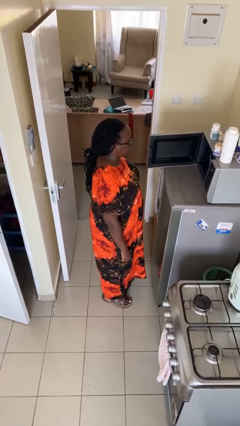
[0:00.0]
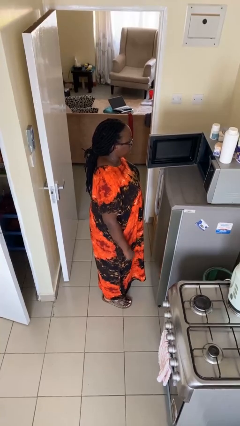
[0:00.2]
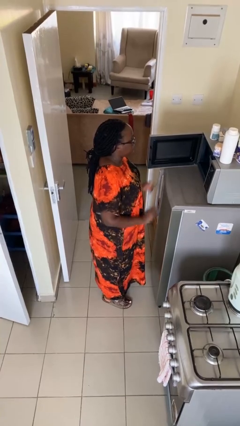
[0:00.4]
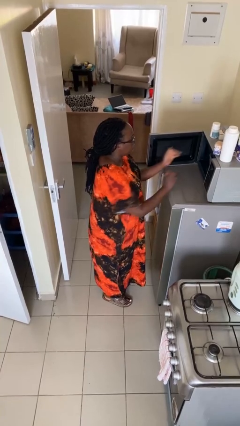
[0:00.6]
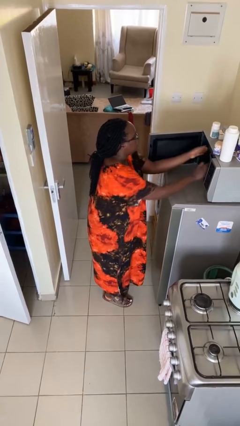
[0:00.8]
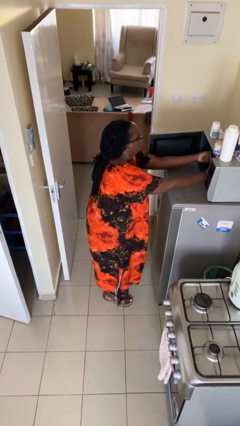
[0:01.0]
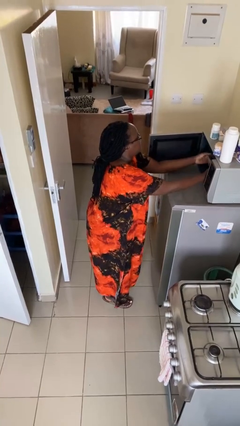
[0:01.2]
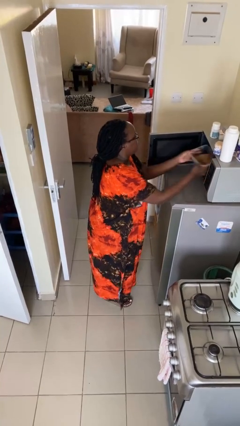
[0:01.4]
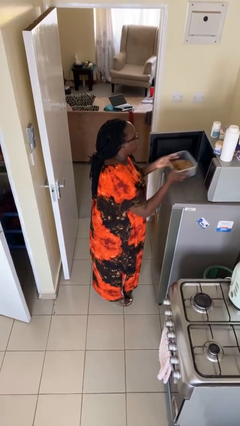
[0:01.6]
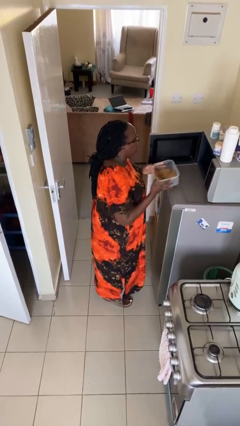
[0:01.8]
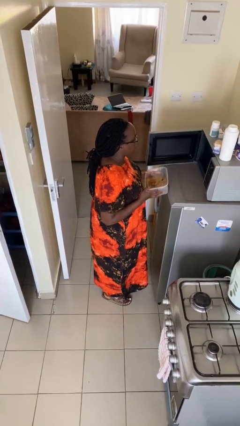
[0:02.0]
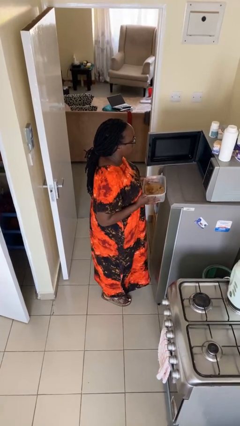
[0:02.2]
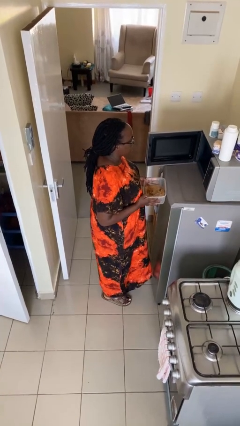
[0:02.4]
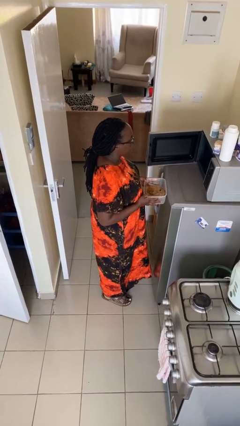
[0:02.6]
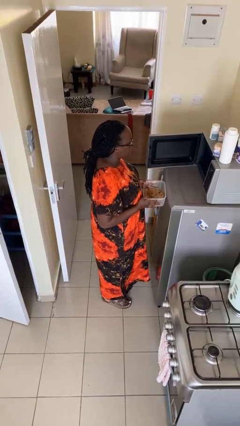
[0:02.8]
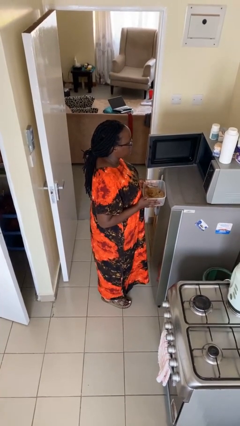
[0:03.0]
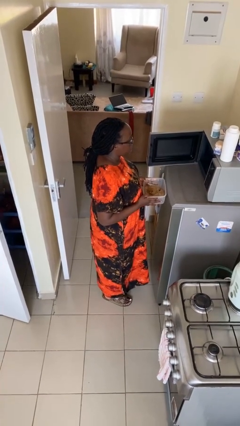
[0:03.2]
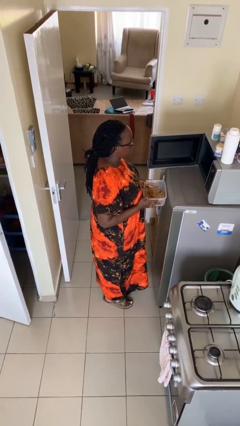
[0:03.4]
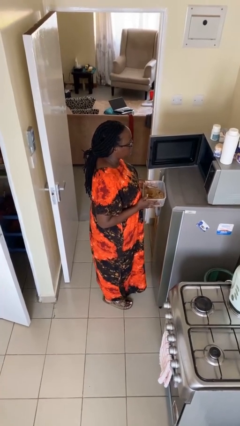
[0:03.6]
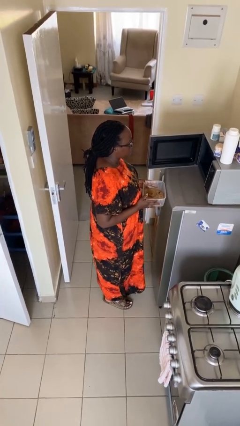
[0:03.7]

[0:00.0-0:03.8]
person takes object from microwave

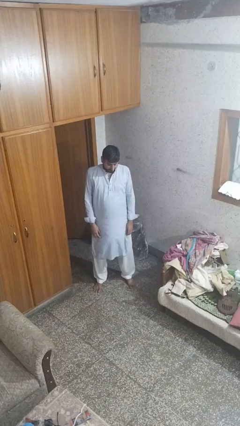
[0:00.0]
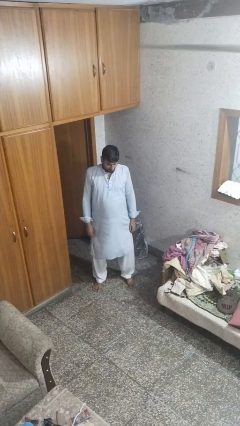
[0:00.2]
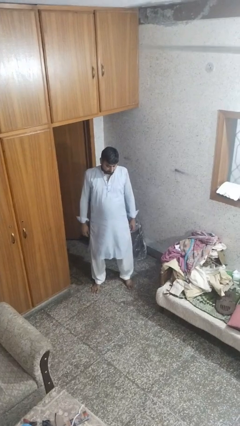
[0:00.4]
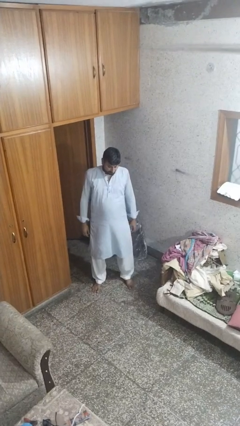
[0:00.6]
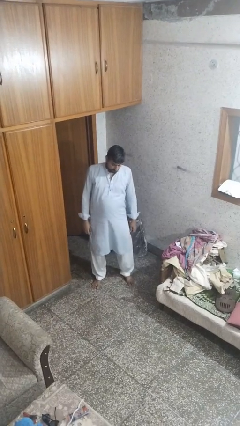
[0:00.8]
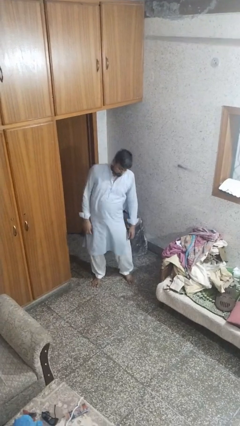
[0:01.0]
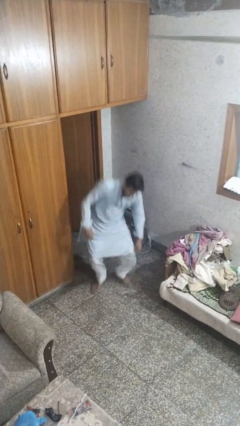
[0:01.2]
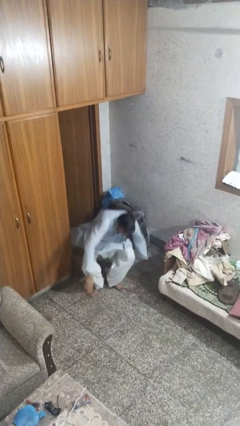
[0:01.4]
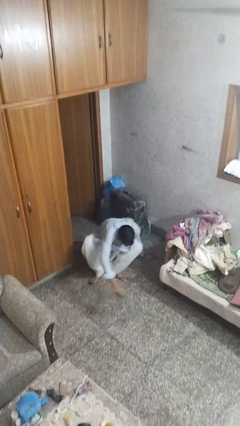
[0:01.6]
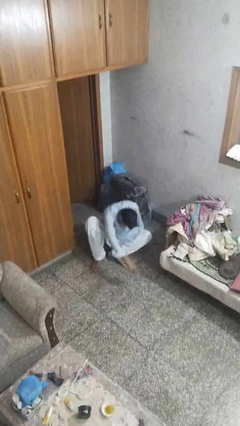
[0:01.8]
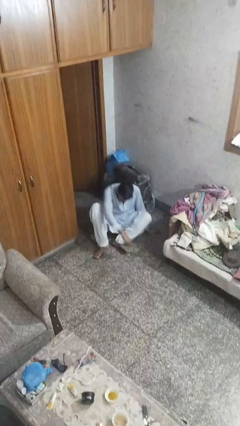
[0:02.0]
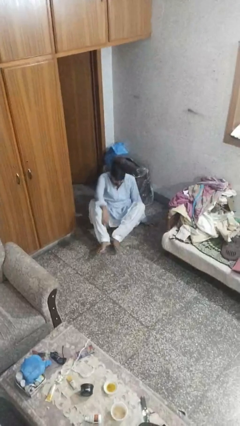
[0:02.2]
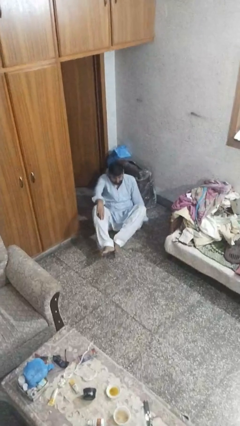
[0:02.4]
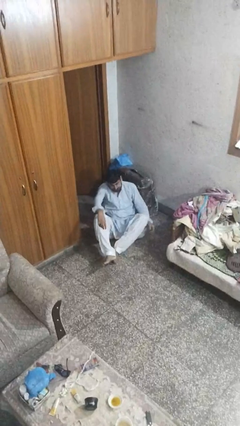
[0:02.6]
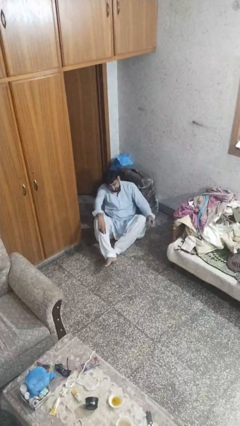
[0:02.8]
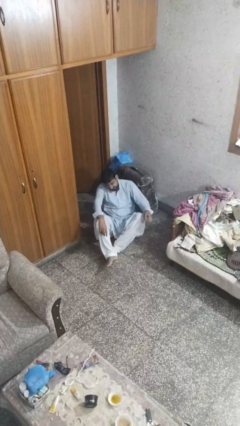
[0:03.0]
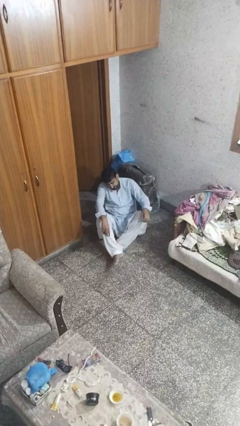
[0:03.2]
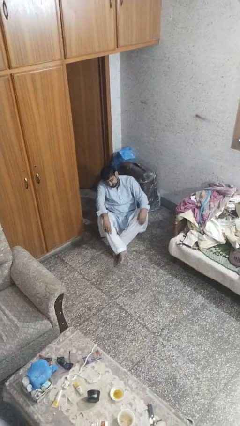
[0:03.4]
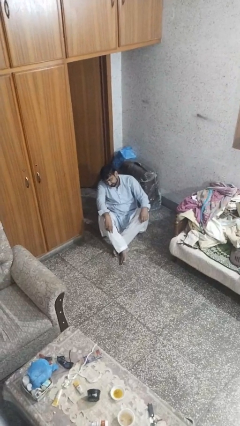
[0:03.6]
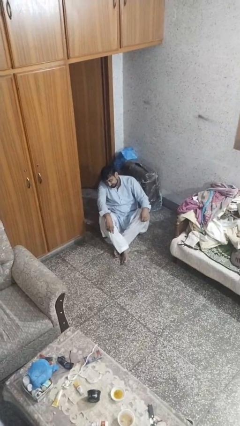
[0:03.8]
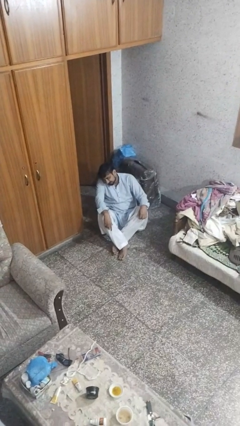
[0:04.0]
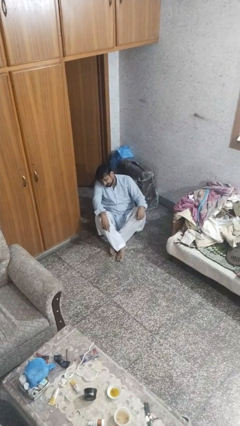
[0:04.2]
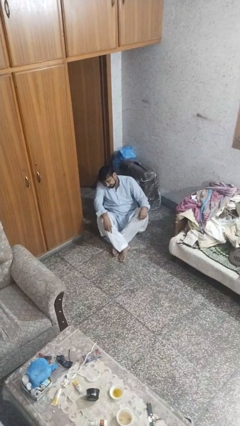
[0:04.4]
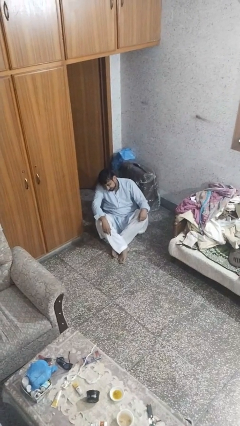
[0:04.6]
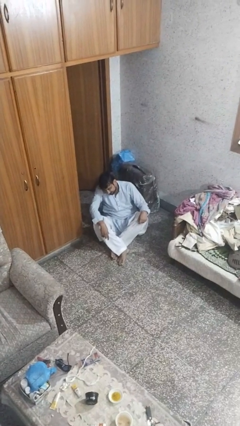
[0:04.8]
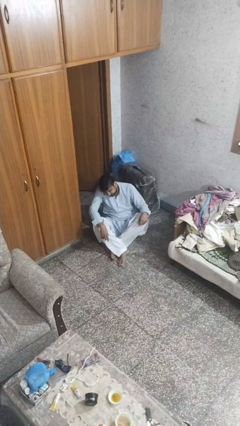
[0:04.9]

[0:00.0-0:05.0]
person falls while standing

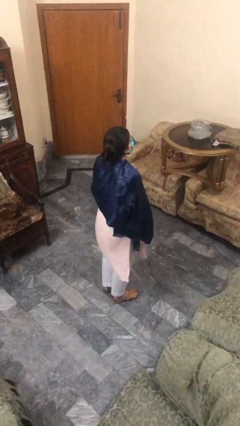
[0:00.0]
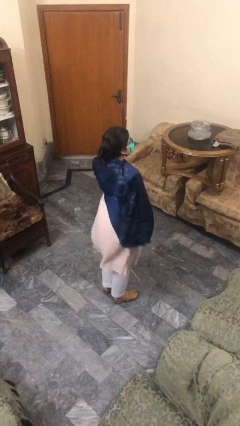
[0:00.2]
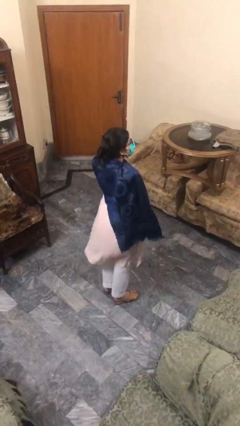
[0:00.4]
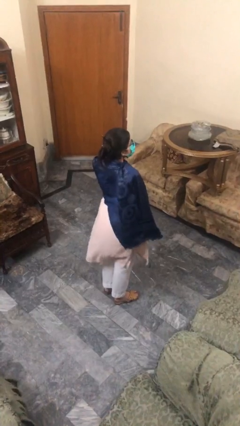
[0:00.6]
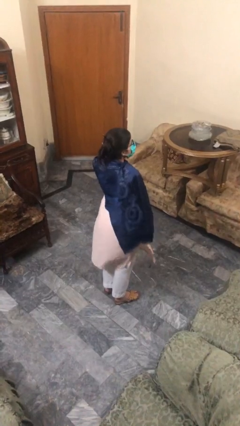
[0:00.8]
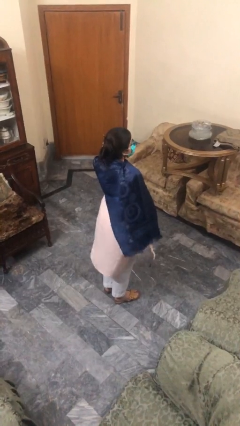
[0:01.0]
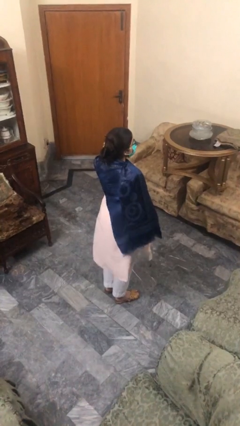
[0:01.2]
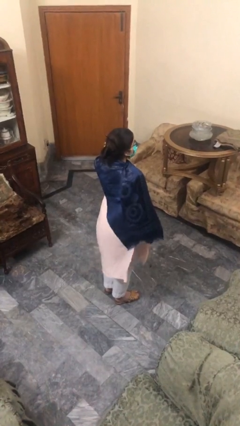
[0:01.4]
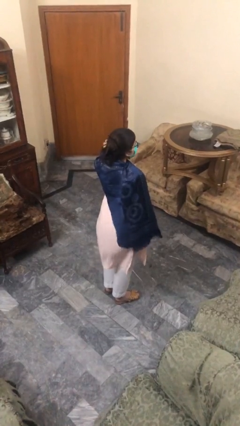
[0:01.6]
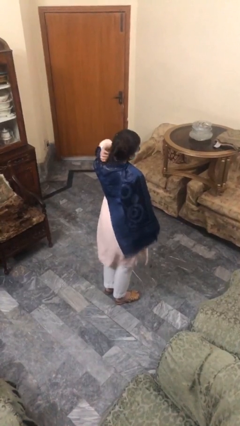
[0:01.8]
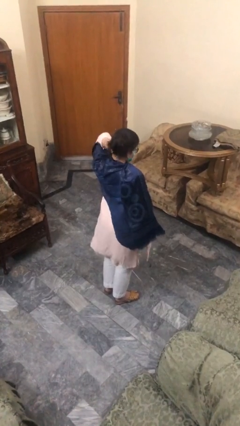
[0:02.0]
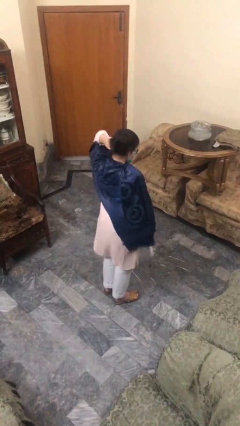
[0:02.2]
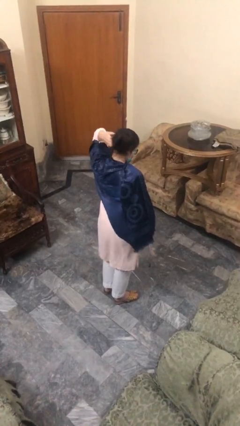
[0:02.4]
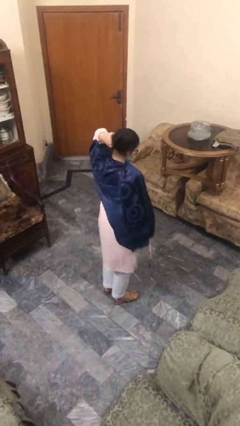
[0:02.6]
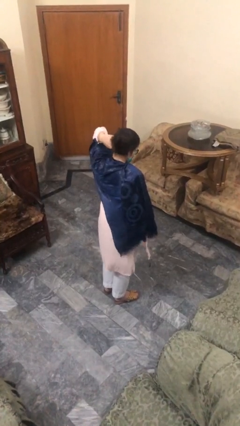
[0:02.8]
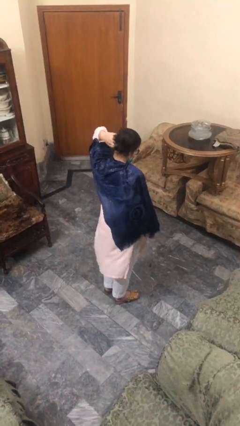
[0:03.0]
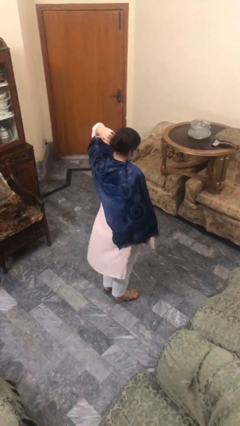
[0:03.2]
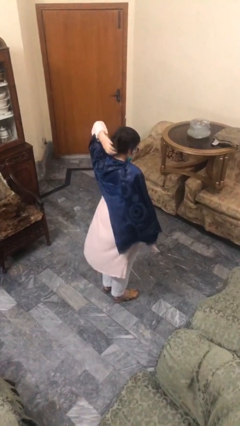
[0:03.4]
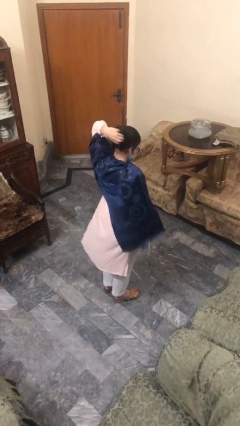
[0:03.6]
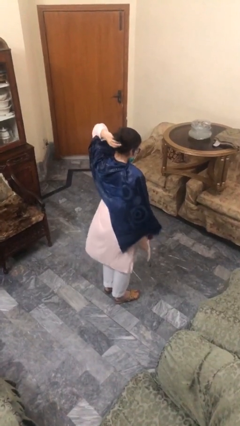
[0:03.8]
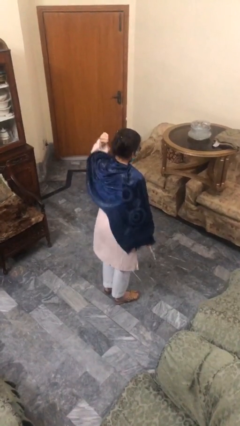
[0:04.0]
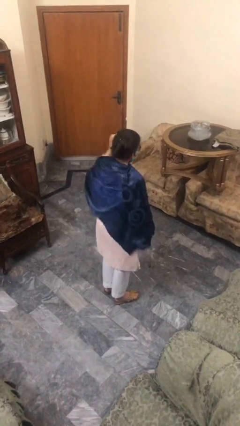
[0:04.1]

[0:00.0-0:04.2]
person scratches face

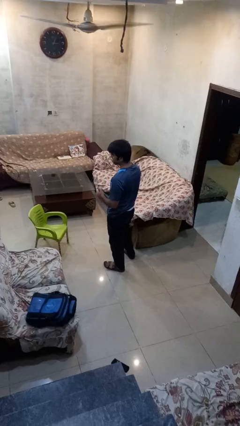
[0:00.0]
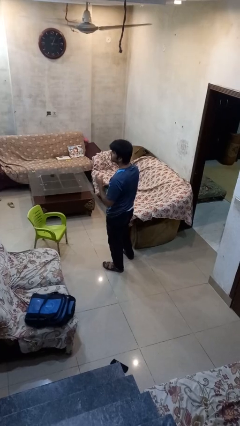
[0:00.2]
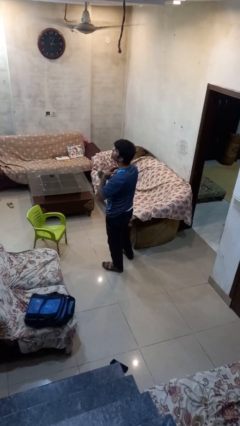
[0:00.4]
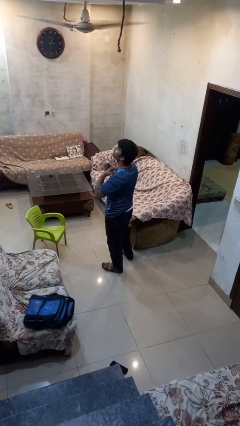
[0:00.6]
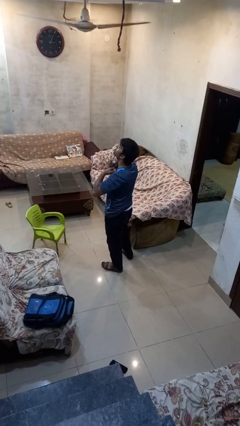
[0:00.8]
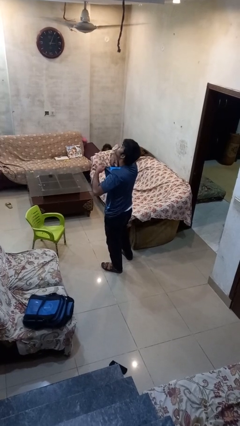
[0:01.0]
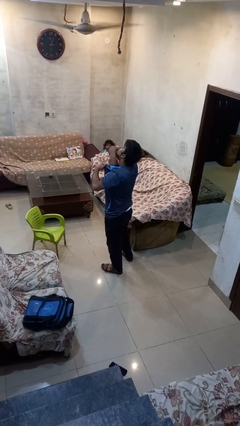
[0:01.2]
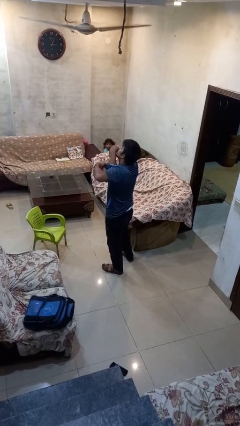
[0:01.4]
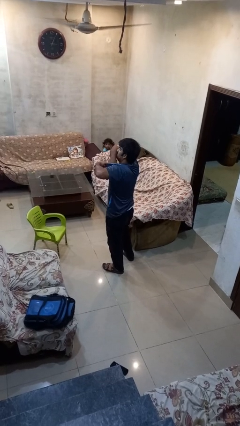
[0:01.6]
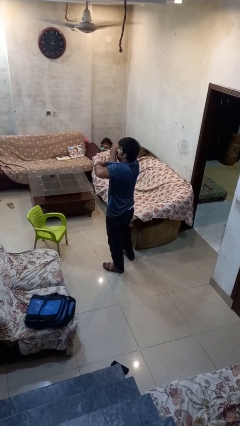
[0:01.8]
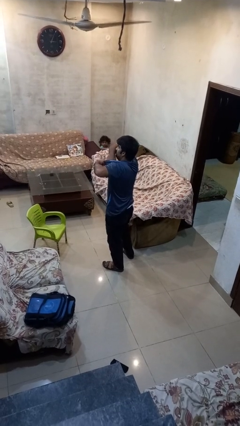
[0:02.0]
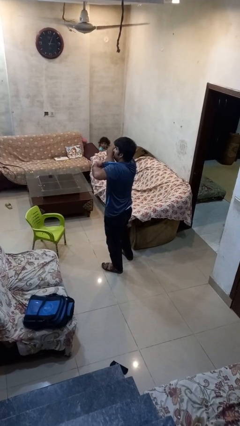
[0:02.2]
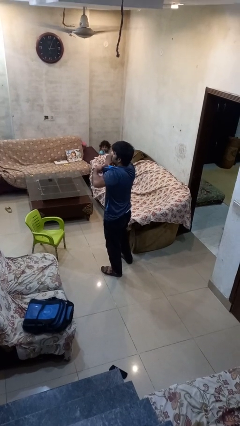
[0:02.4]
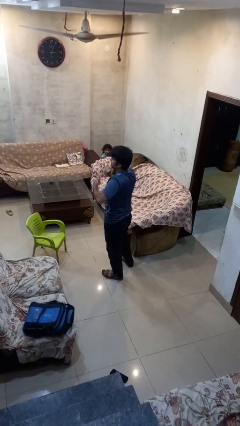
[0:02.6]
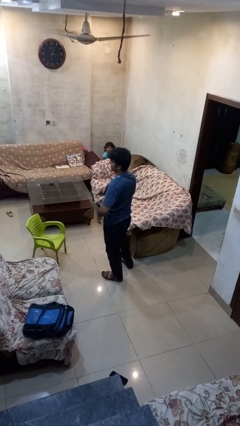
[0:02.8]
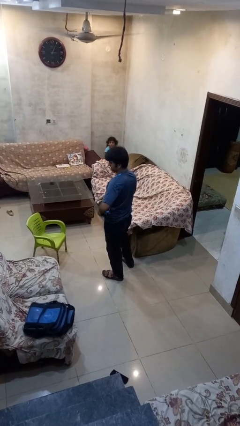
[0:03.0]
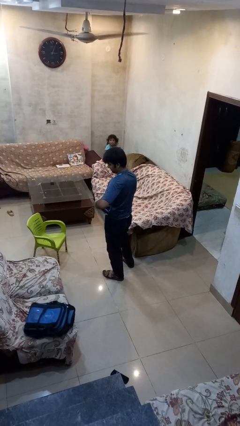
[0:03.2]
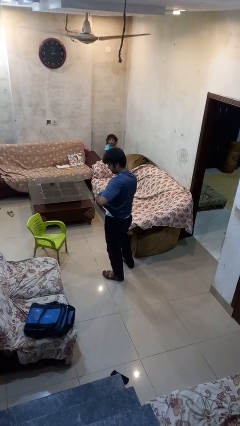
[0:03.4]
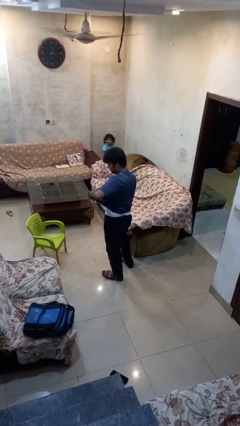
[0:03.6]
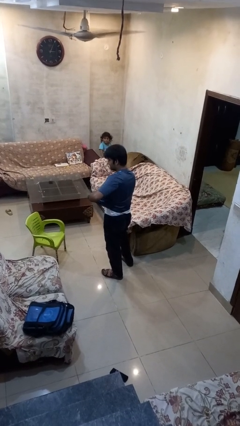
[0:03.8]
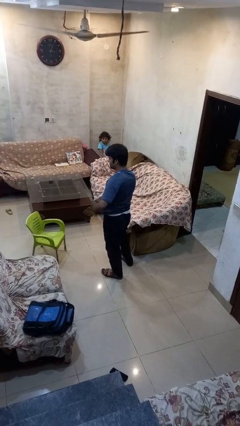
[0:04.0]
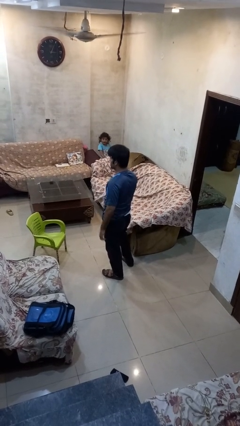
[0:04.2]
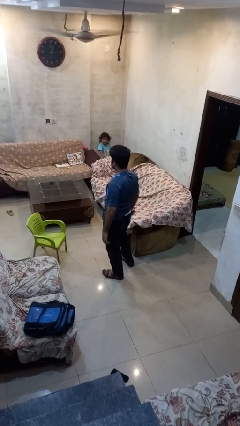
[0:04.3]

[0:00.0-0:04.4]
person applies deodorant

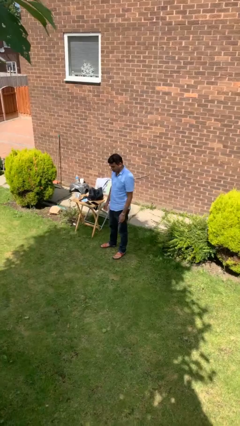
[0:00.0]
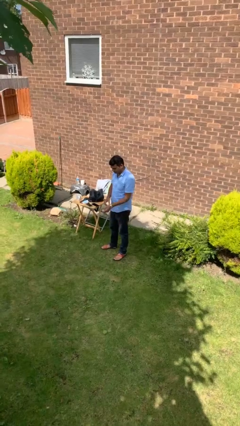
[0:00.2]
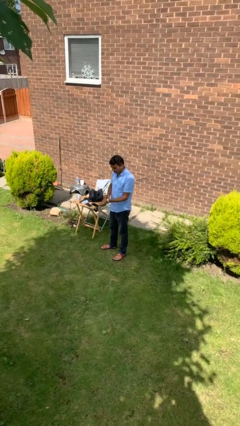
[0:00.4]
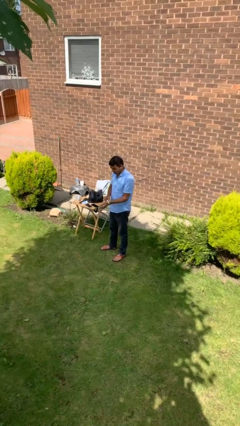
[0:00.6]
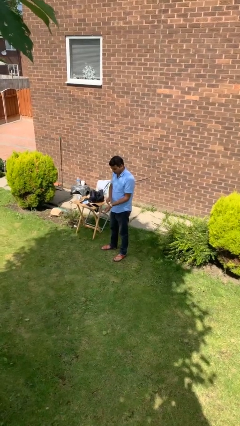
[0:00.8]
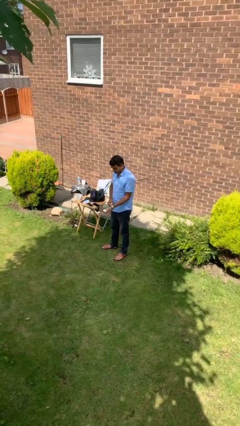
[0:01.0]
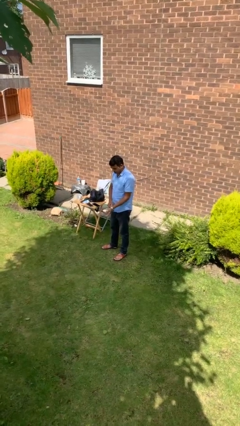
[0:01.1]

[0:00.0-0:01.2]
person takes off wristwatch
